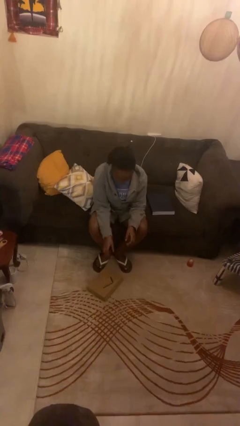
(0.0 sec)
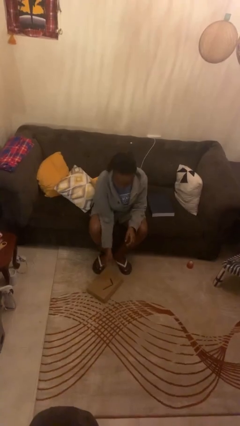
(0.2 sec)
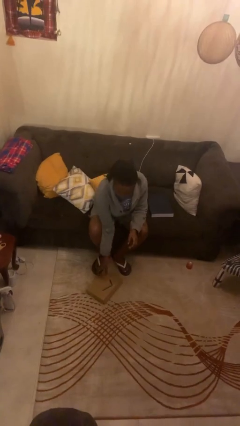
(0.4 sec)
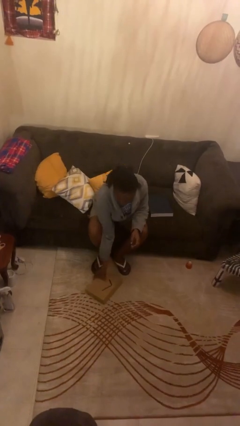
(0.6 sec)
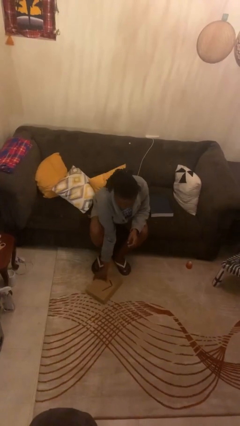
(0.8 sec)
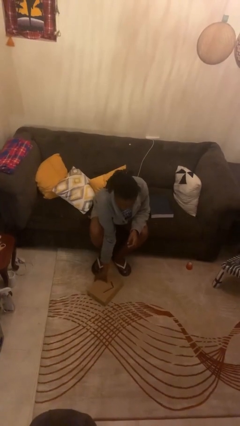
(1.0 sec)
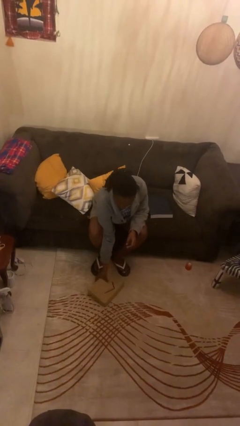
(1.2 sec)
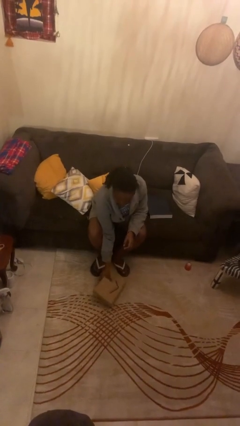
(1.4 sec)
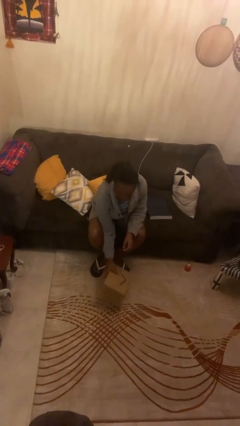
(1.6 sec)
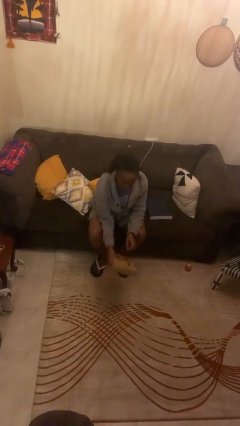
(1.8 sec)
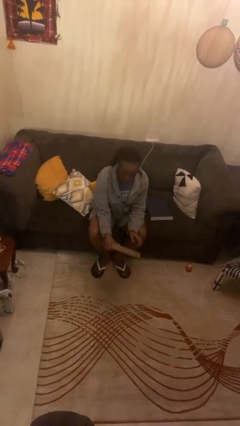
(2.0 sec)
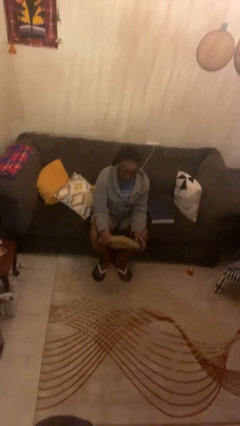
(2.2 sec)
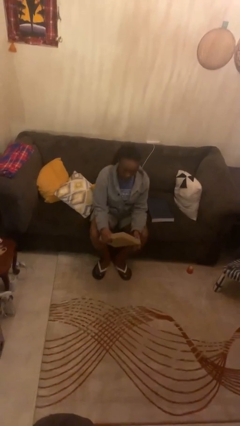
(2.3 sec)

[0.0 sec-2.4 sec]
person picks up object from floor

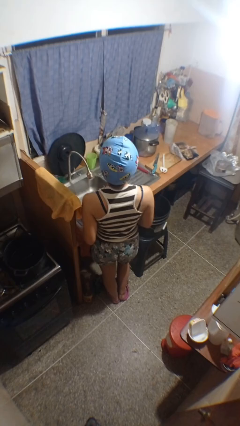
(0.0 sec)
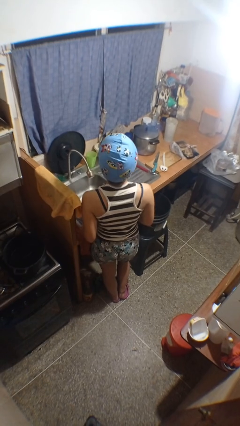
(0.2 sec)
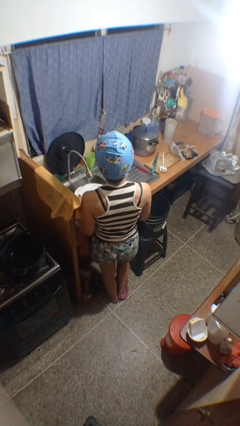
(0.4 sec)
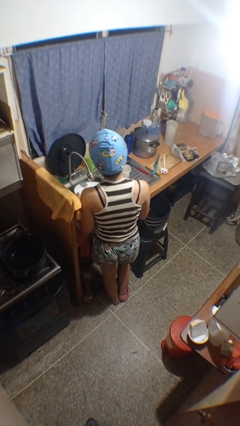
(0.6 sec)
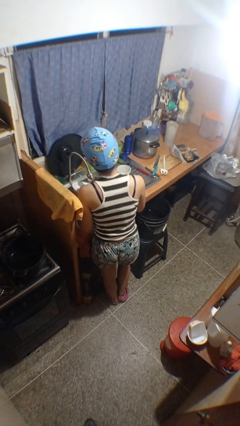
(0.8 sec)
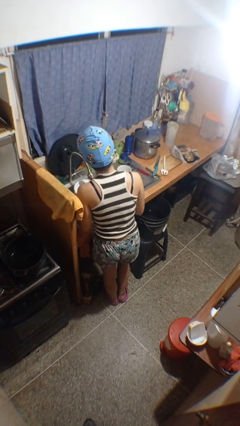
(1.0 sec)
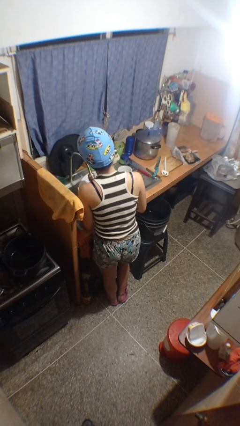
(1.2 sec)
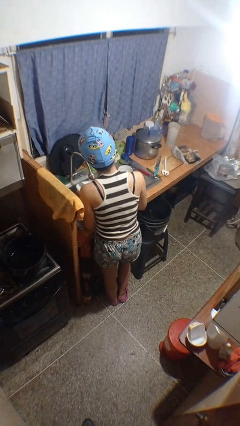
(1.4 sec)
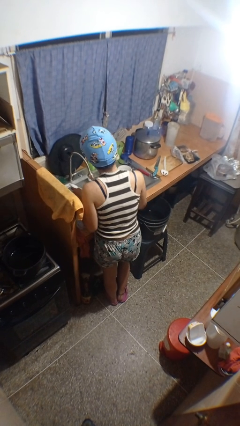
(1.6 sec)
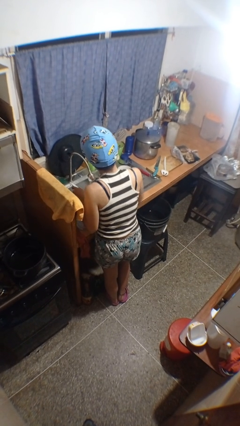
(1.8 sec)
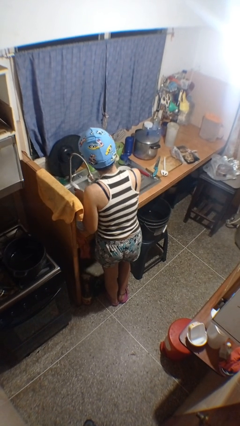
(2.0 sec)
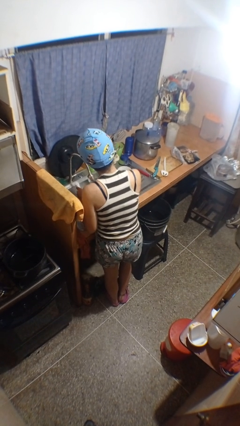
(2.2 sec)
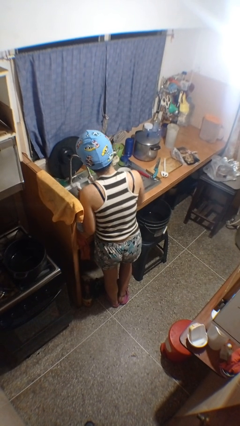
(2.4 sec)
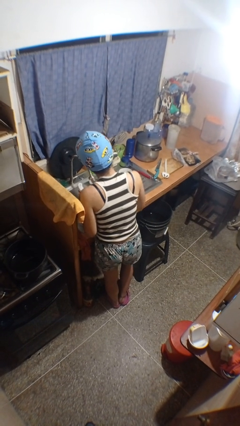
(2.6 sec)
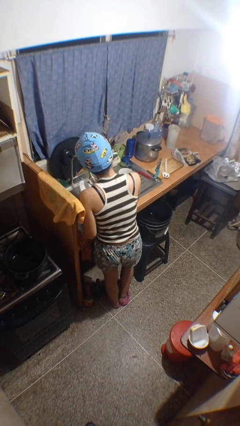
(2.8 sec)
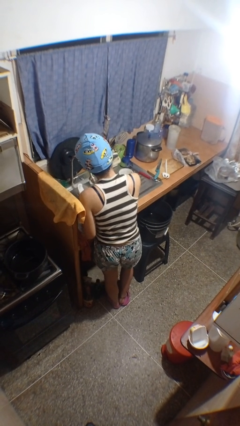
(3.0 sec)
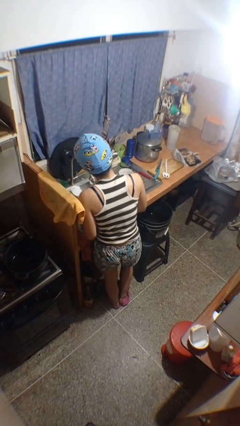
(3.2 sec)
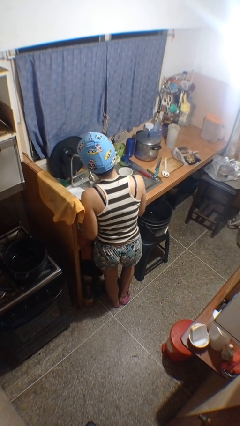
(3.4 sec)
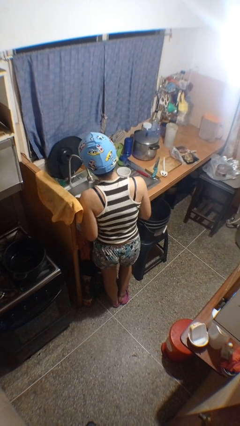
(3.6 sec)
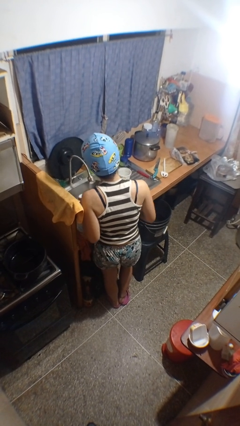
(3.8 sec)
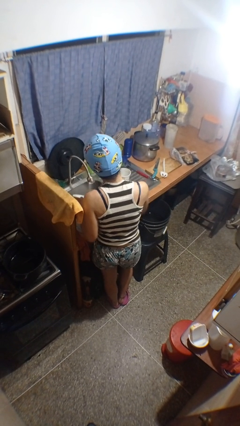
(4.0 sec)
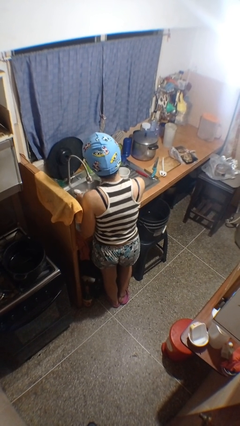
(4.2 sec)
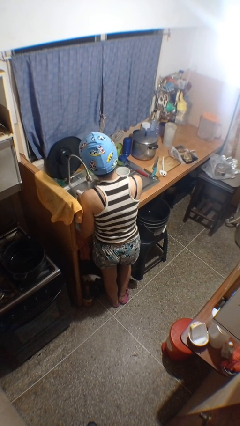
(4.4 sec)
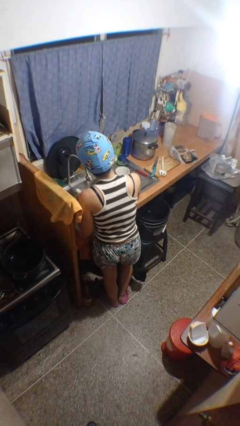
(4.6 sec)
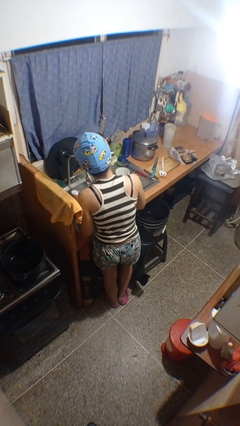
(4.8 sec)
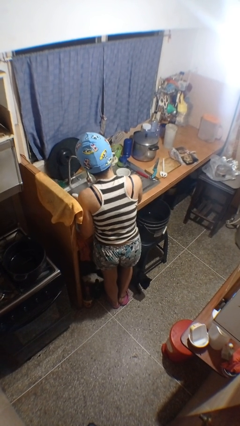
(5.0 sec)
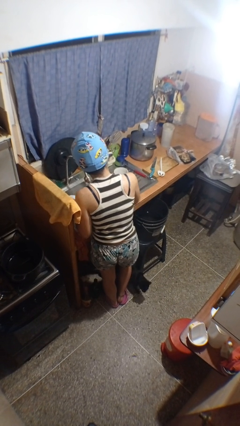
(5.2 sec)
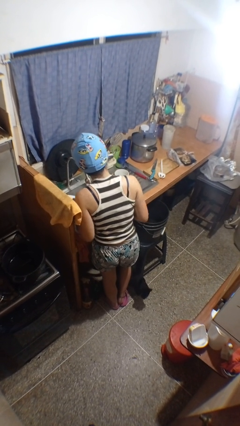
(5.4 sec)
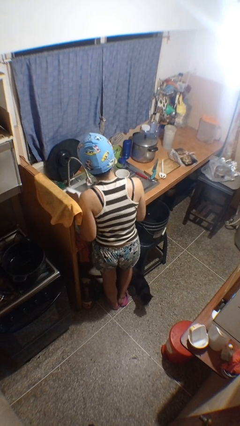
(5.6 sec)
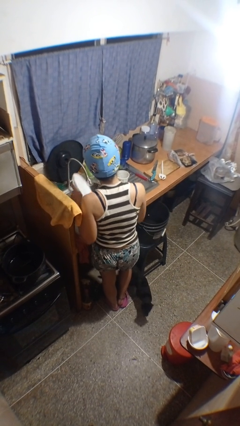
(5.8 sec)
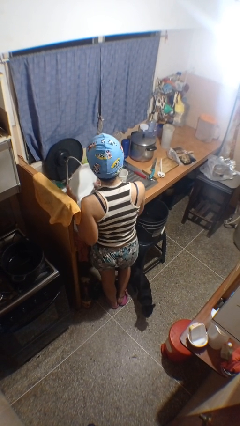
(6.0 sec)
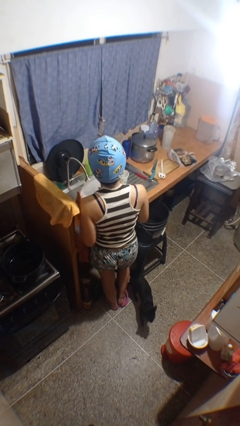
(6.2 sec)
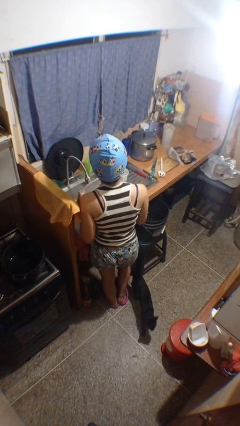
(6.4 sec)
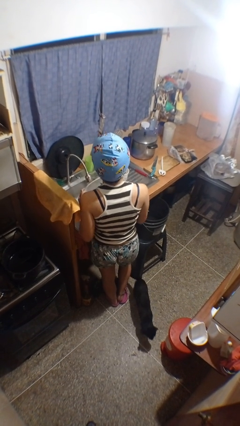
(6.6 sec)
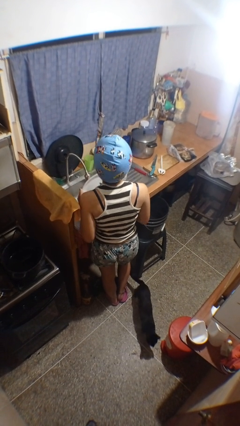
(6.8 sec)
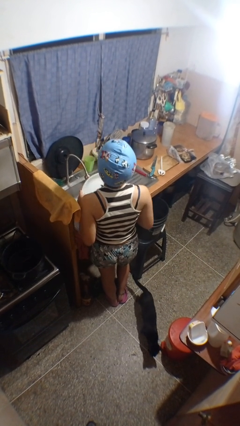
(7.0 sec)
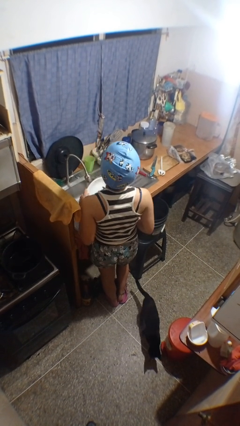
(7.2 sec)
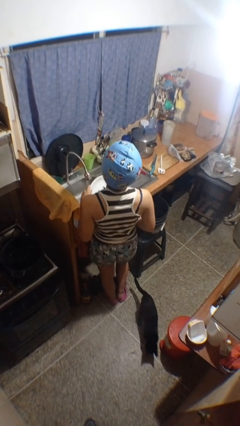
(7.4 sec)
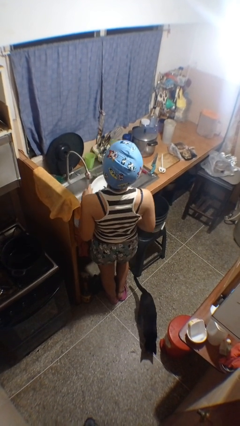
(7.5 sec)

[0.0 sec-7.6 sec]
person washes dish

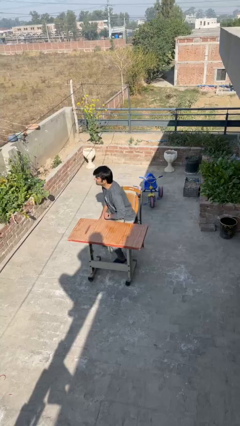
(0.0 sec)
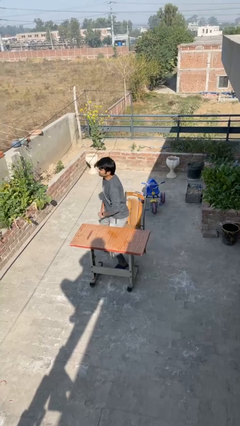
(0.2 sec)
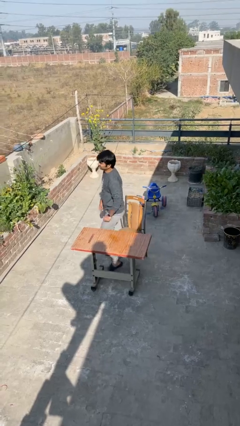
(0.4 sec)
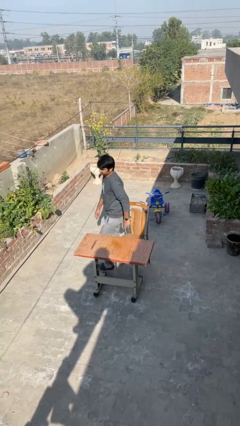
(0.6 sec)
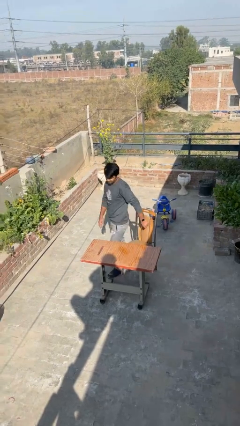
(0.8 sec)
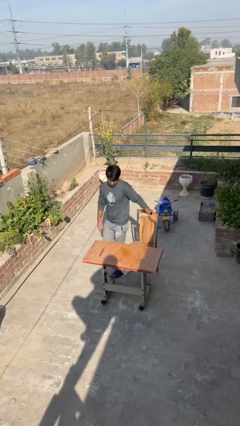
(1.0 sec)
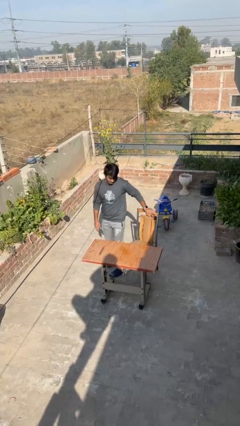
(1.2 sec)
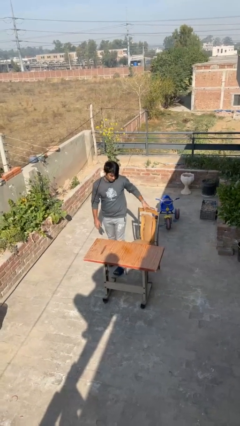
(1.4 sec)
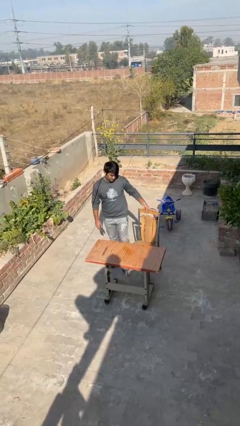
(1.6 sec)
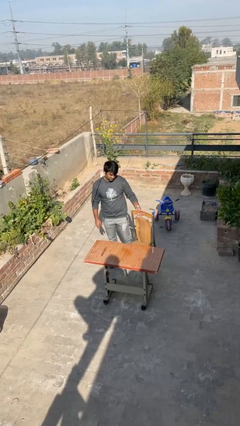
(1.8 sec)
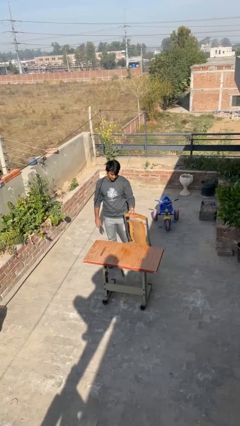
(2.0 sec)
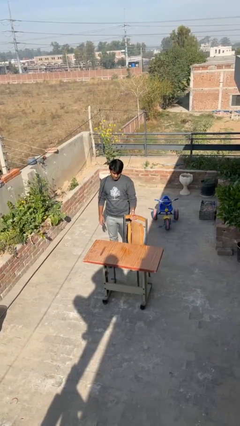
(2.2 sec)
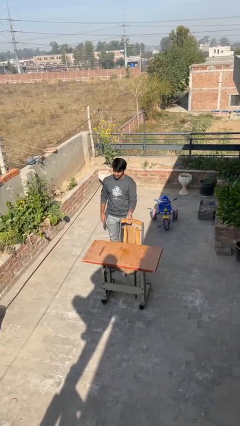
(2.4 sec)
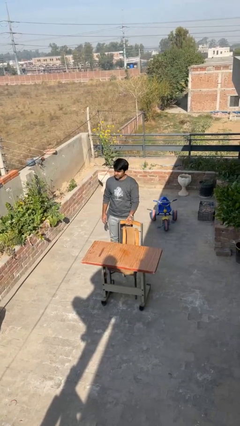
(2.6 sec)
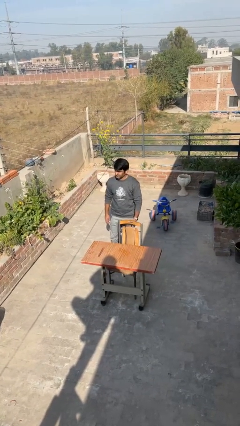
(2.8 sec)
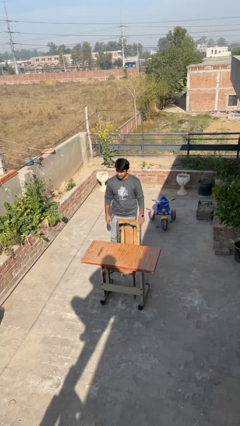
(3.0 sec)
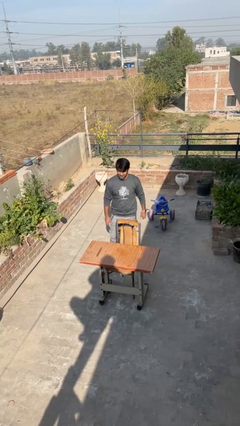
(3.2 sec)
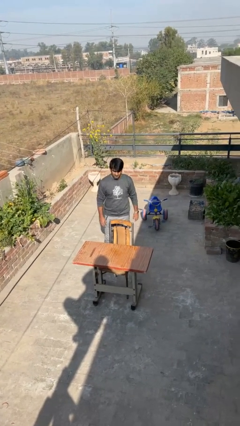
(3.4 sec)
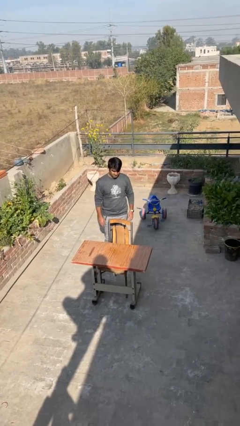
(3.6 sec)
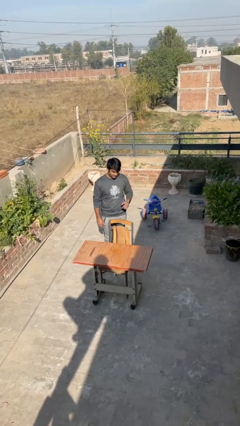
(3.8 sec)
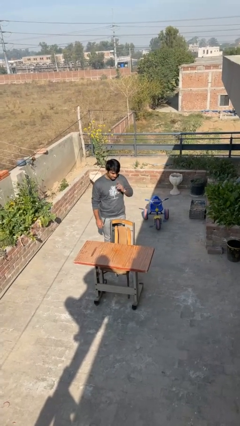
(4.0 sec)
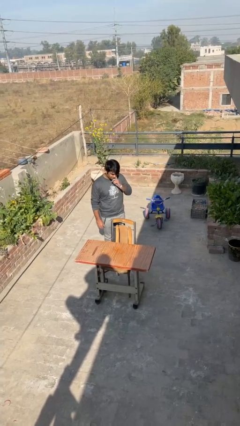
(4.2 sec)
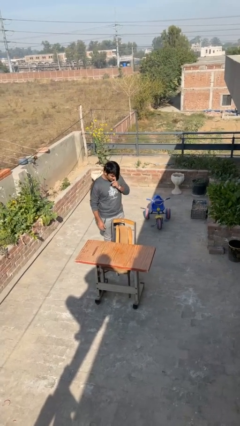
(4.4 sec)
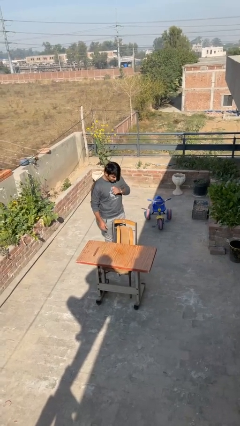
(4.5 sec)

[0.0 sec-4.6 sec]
person stands up

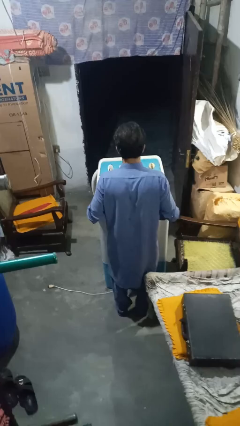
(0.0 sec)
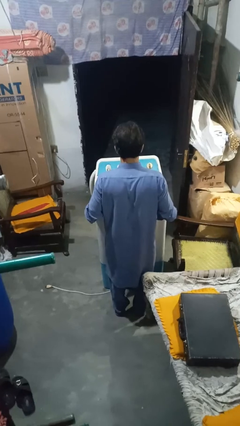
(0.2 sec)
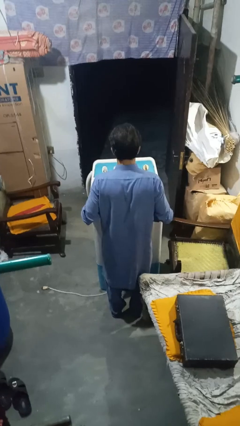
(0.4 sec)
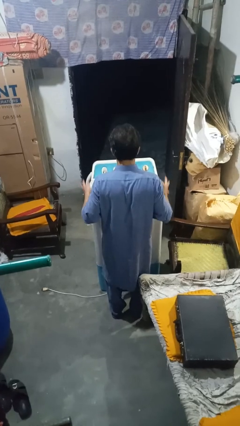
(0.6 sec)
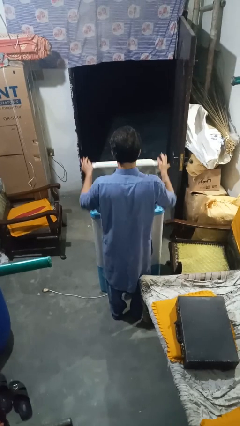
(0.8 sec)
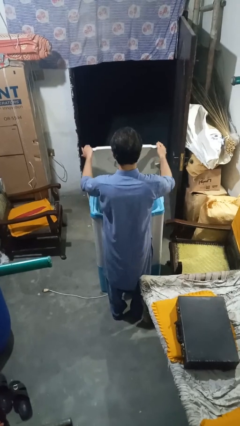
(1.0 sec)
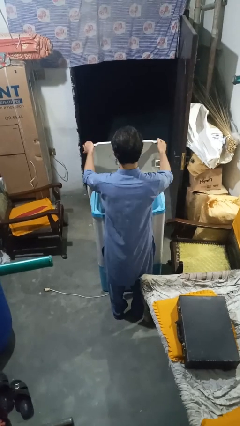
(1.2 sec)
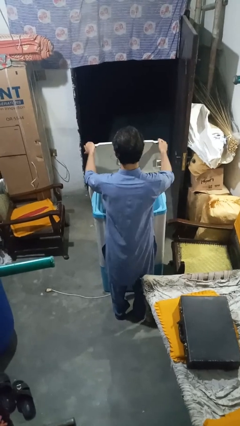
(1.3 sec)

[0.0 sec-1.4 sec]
person opens clothes washer

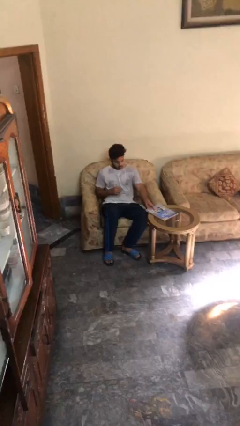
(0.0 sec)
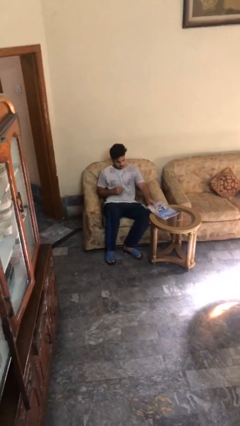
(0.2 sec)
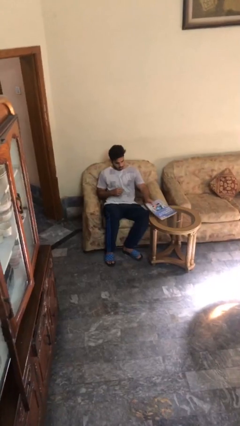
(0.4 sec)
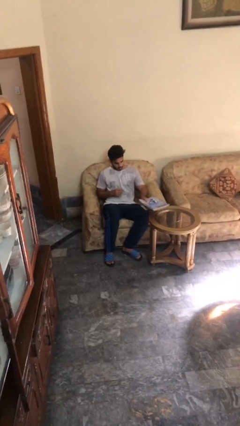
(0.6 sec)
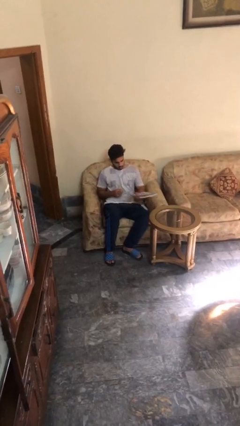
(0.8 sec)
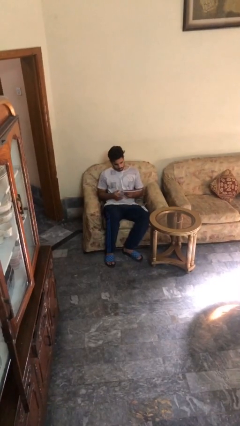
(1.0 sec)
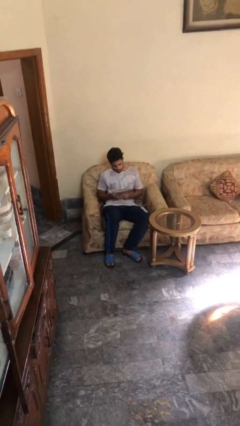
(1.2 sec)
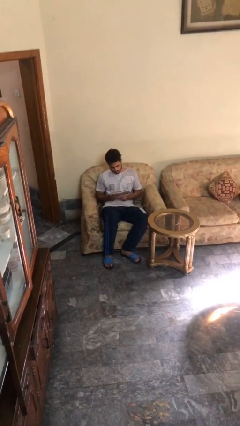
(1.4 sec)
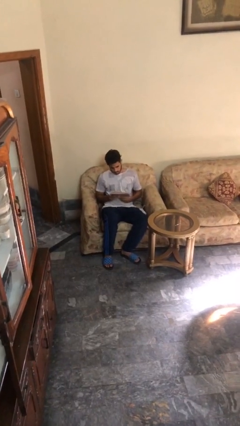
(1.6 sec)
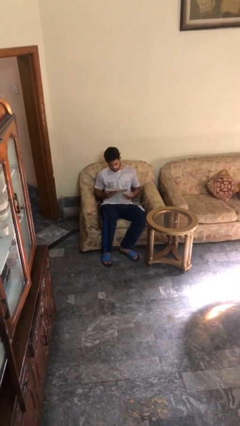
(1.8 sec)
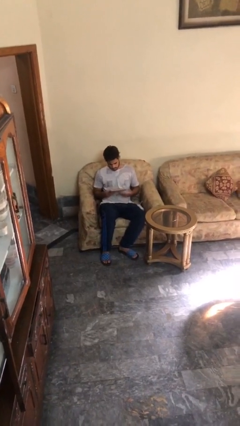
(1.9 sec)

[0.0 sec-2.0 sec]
person picks up object from table
